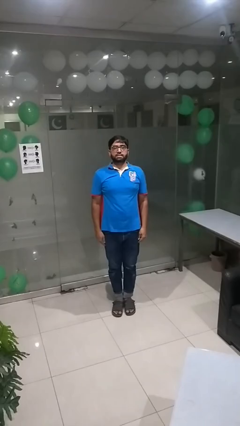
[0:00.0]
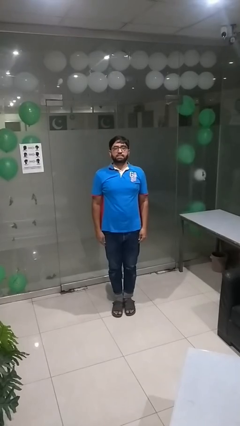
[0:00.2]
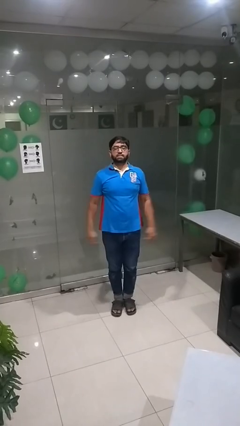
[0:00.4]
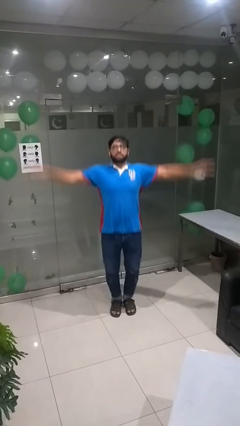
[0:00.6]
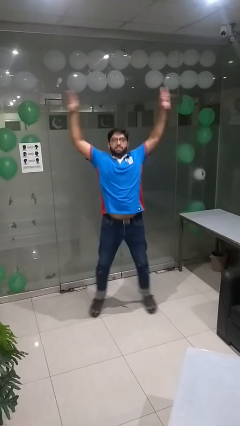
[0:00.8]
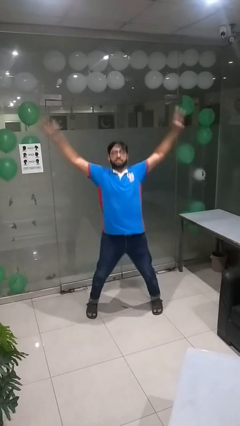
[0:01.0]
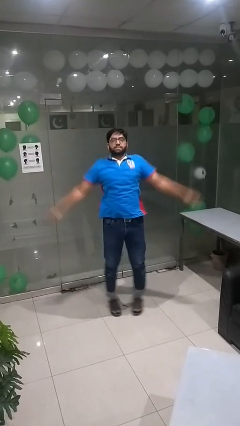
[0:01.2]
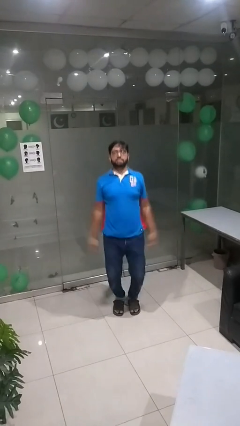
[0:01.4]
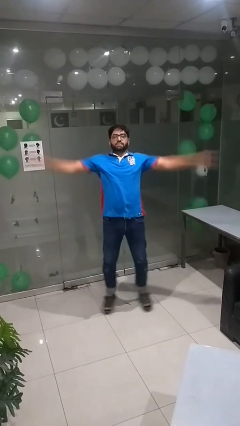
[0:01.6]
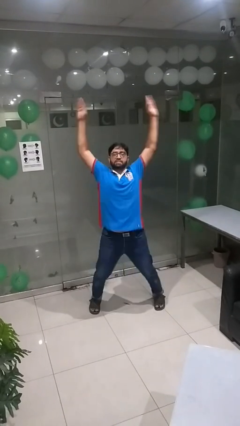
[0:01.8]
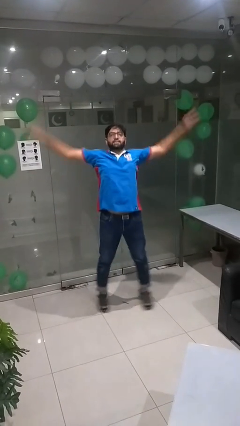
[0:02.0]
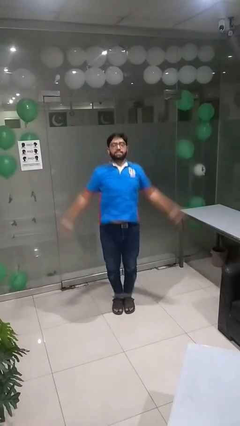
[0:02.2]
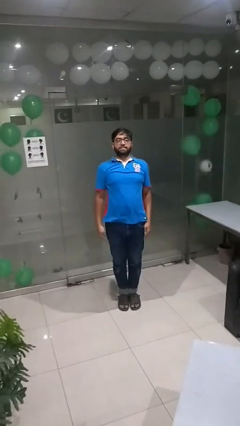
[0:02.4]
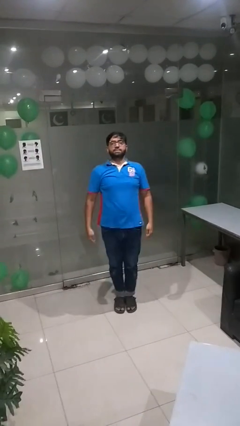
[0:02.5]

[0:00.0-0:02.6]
person exercises with jumping jacks

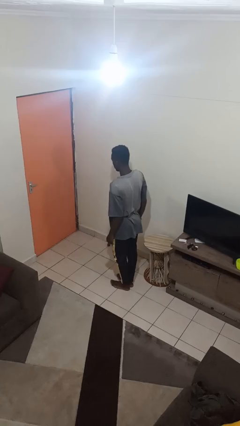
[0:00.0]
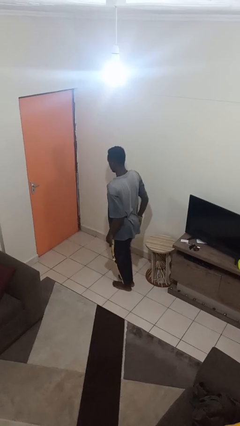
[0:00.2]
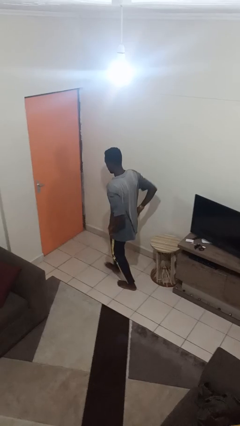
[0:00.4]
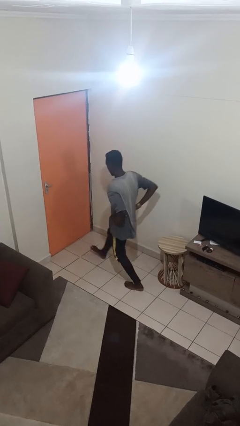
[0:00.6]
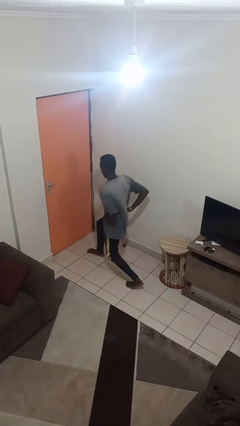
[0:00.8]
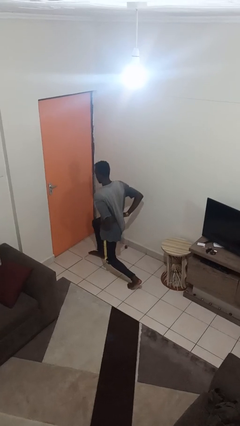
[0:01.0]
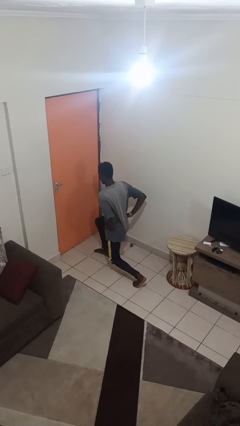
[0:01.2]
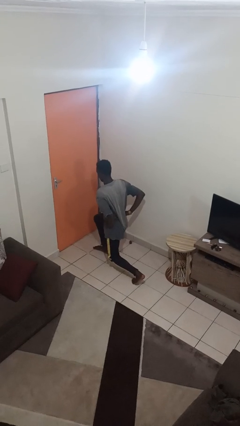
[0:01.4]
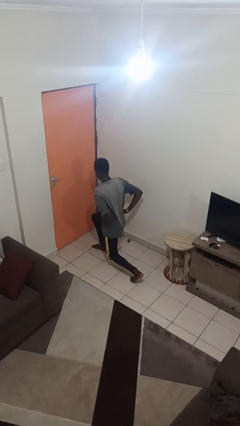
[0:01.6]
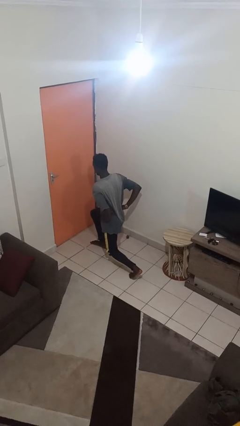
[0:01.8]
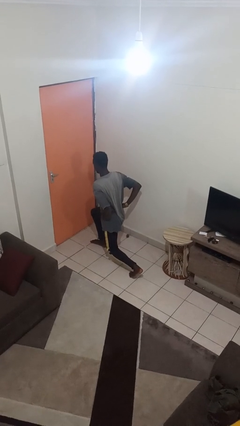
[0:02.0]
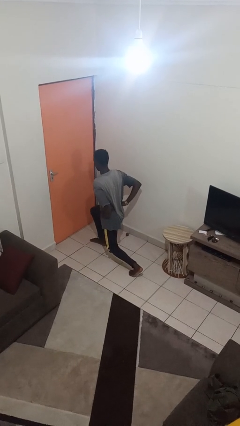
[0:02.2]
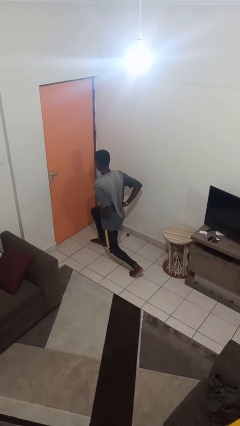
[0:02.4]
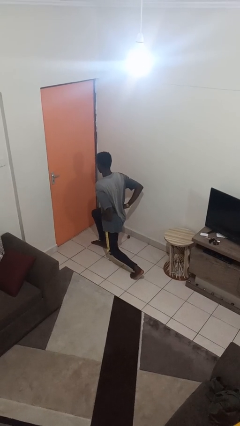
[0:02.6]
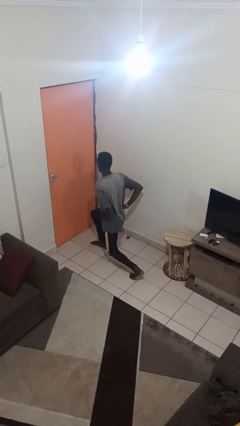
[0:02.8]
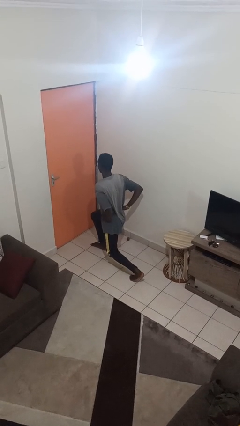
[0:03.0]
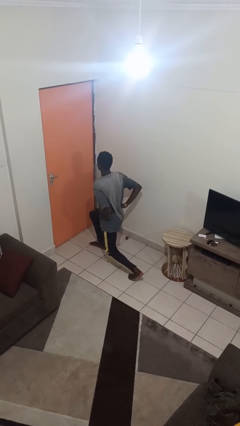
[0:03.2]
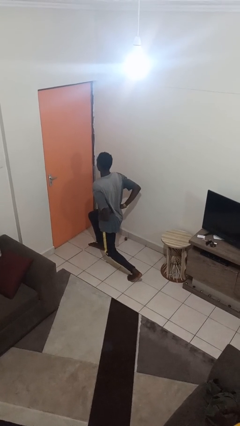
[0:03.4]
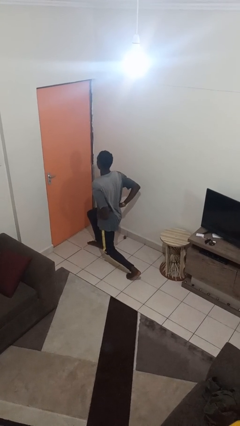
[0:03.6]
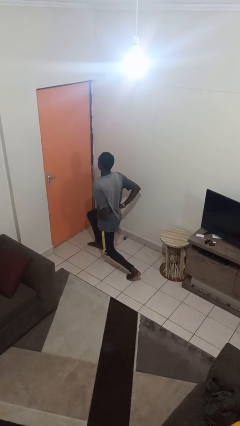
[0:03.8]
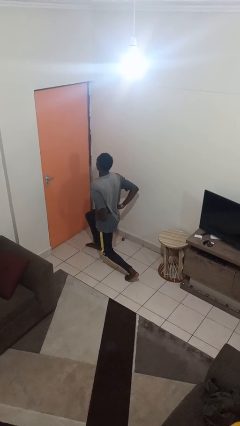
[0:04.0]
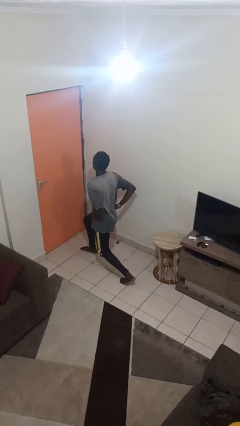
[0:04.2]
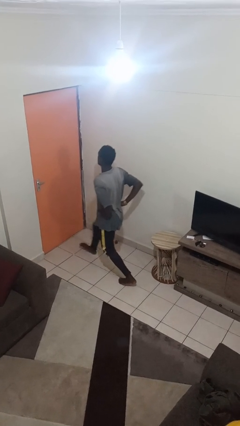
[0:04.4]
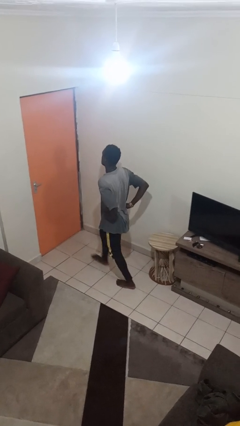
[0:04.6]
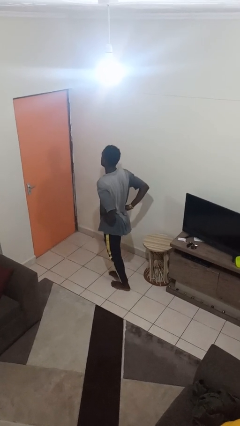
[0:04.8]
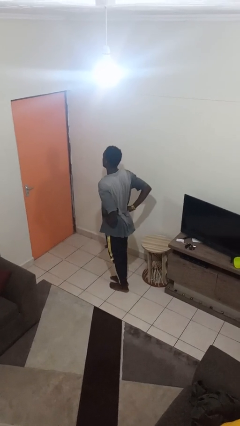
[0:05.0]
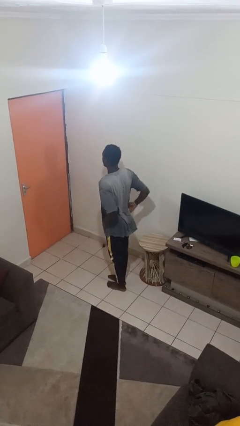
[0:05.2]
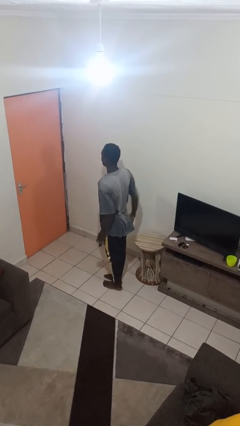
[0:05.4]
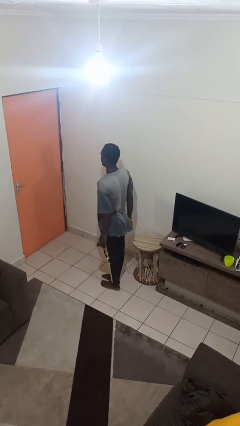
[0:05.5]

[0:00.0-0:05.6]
person exercises with lunges

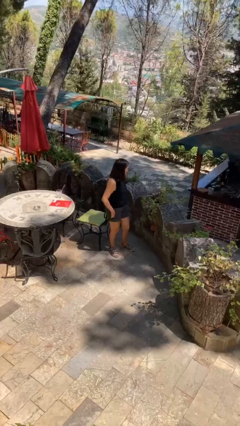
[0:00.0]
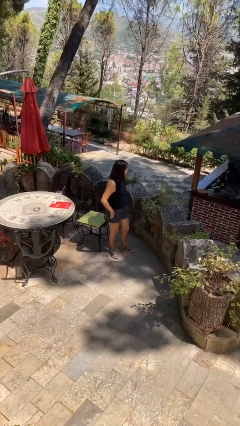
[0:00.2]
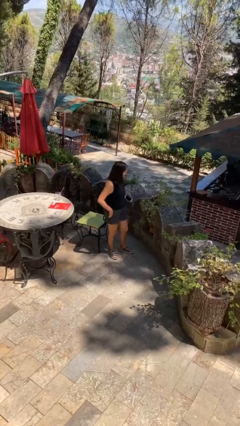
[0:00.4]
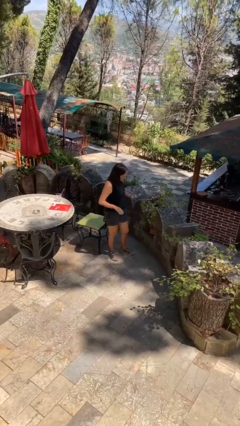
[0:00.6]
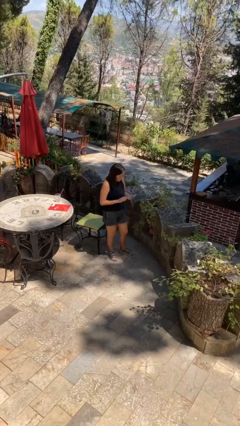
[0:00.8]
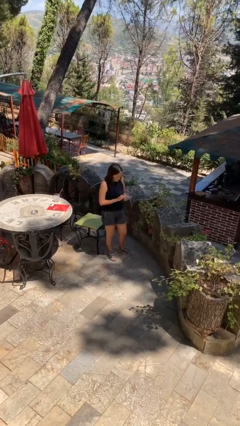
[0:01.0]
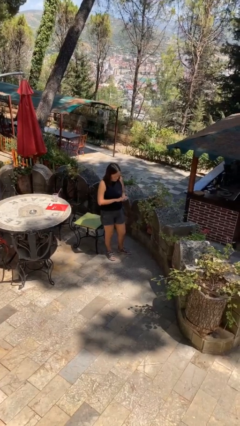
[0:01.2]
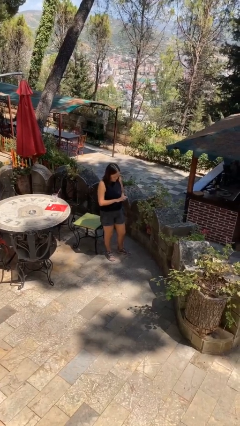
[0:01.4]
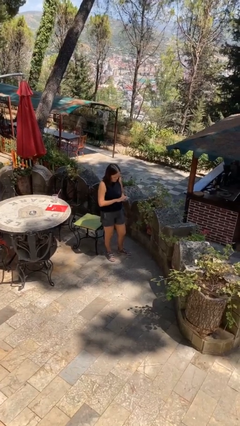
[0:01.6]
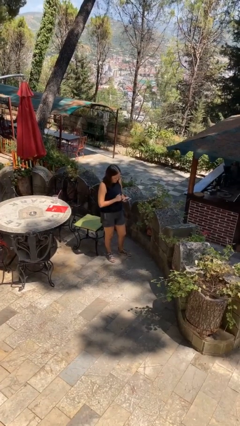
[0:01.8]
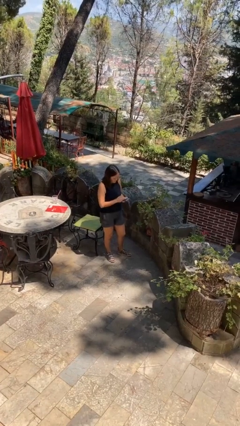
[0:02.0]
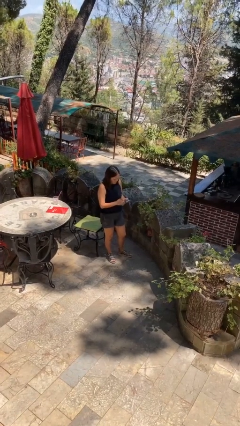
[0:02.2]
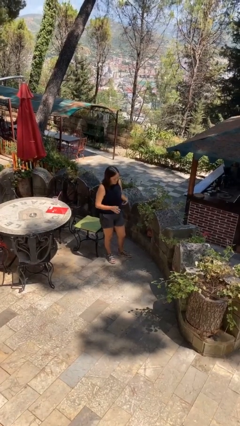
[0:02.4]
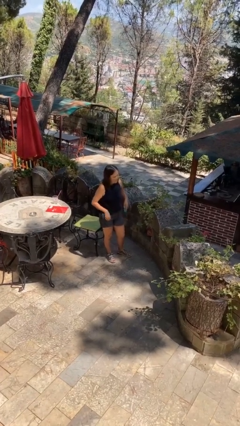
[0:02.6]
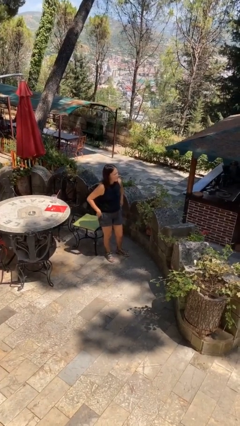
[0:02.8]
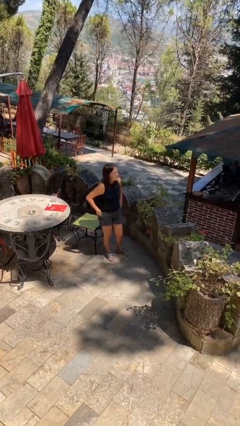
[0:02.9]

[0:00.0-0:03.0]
person takes phone from pocket

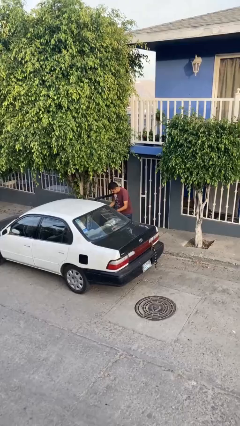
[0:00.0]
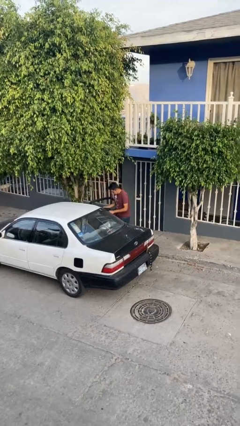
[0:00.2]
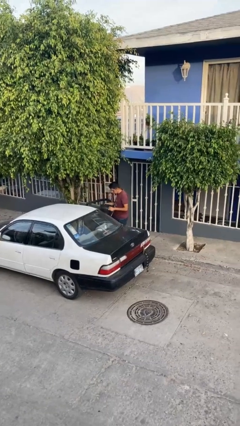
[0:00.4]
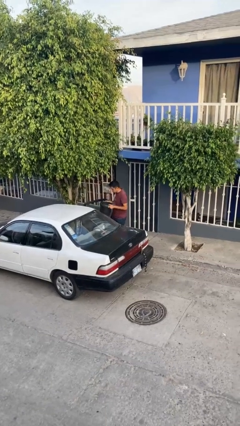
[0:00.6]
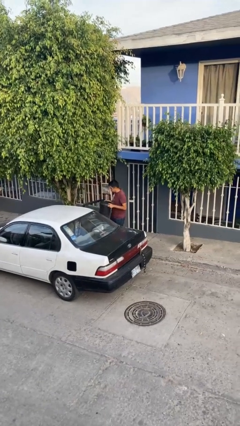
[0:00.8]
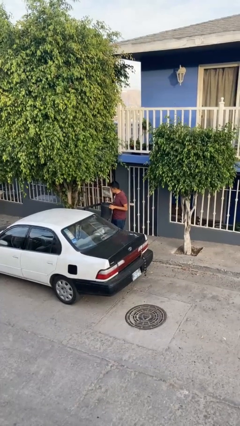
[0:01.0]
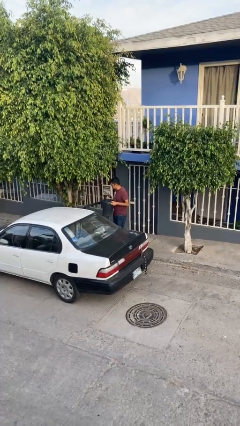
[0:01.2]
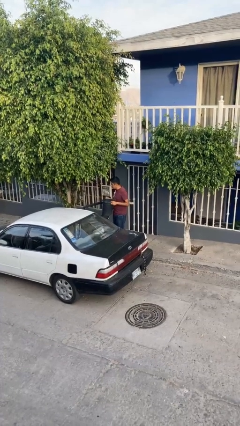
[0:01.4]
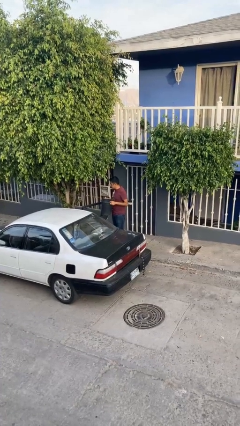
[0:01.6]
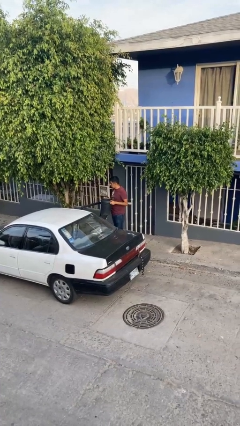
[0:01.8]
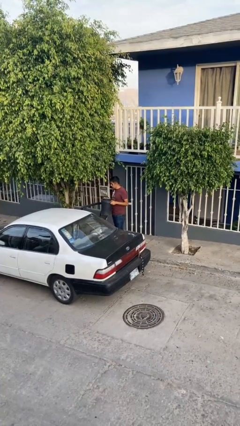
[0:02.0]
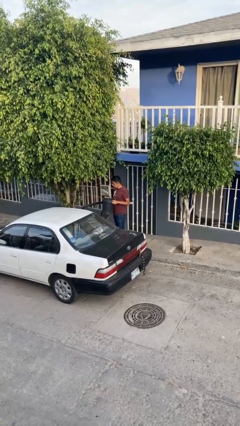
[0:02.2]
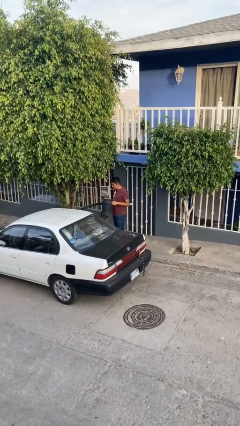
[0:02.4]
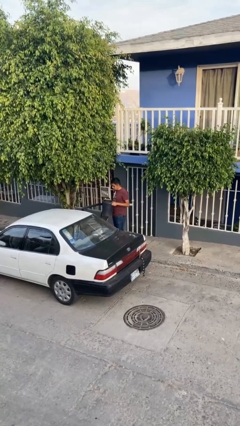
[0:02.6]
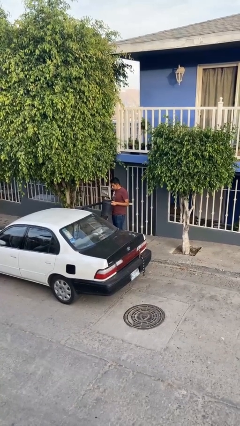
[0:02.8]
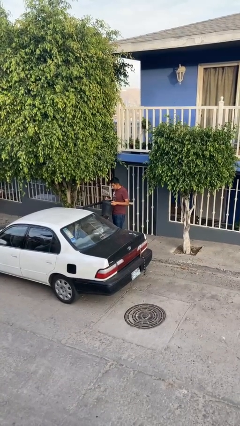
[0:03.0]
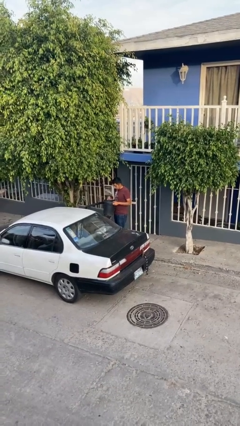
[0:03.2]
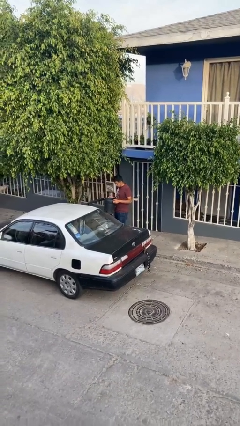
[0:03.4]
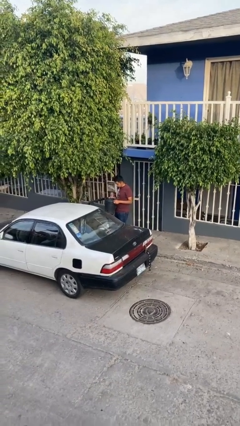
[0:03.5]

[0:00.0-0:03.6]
person unloads car

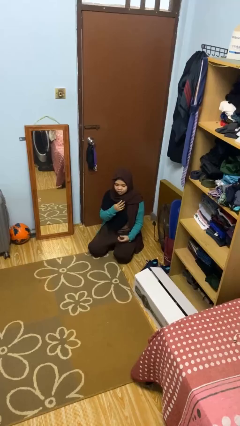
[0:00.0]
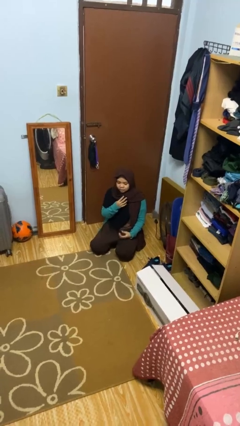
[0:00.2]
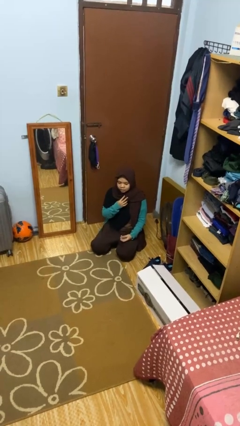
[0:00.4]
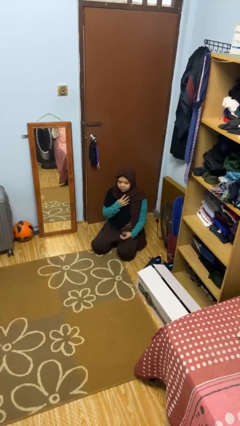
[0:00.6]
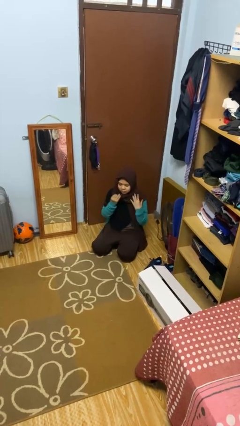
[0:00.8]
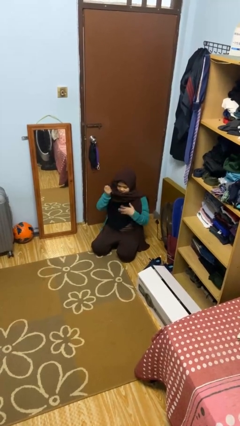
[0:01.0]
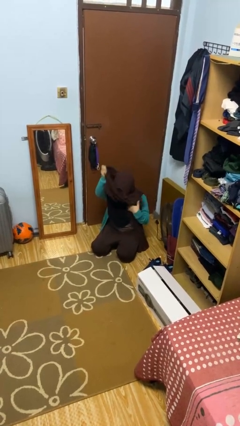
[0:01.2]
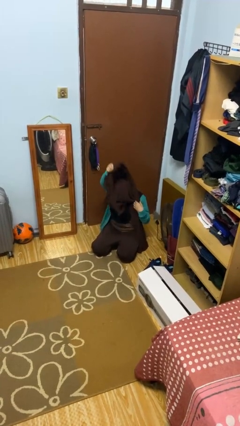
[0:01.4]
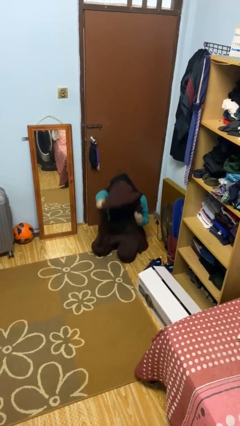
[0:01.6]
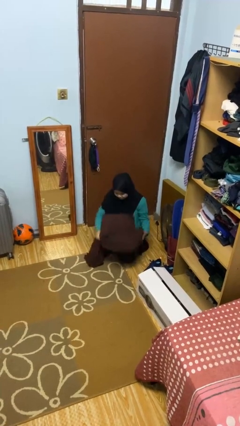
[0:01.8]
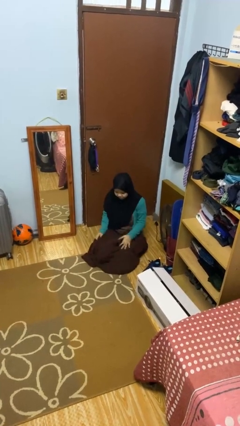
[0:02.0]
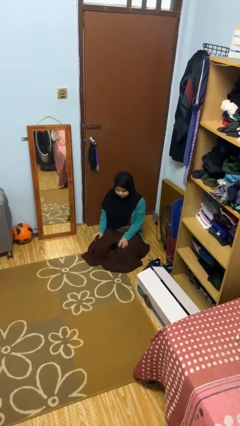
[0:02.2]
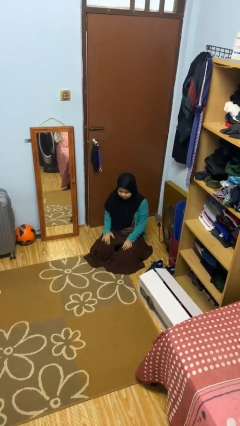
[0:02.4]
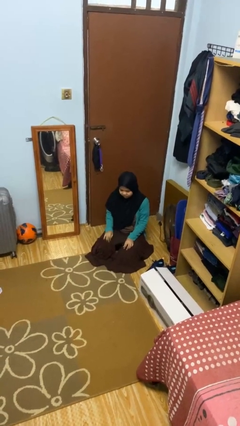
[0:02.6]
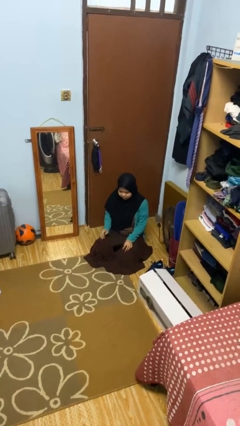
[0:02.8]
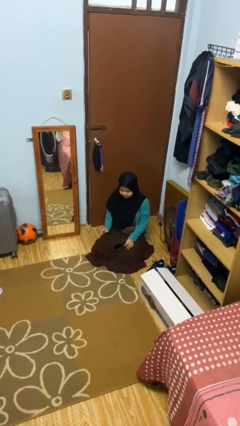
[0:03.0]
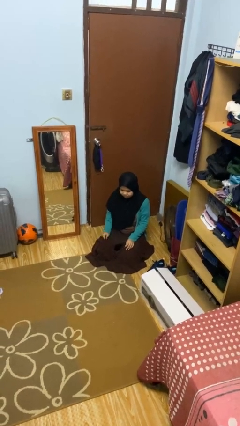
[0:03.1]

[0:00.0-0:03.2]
person takes off scarf
